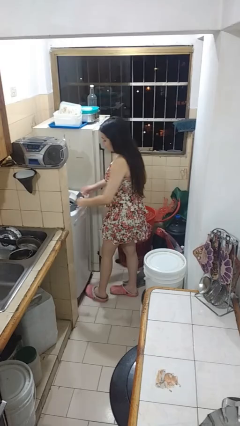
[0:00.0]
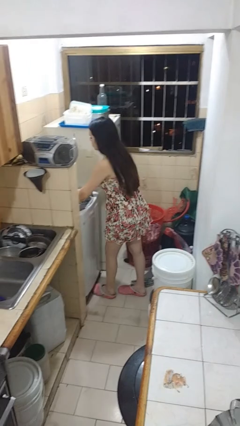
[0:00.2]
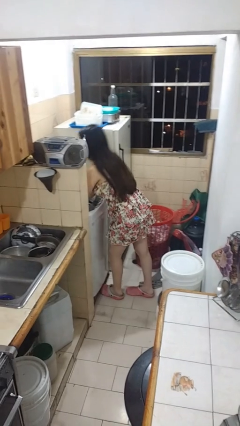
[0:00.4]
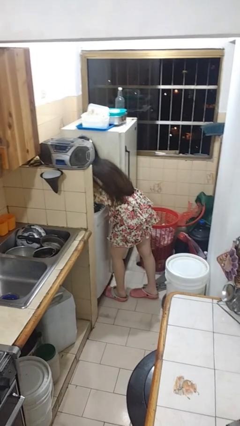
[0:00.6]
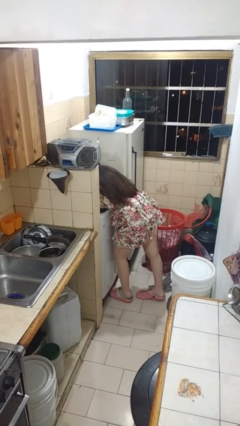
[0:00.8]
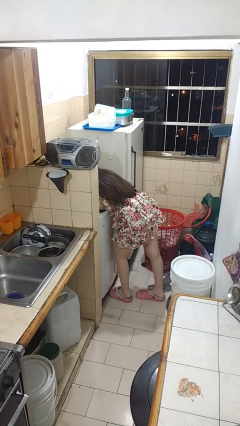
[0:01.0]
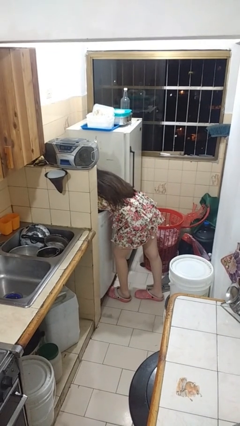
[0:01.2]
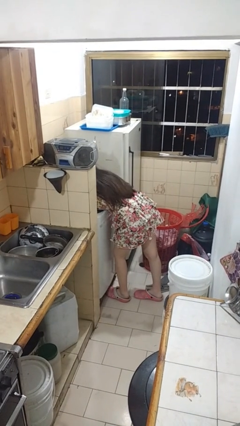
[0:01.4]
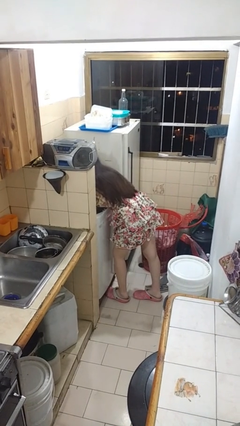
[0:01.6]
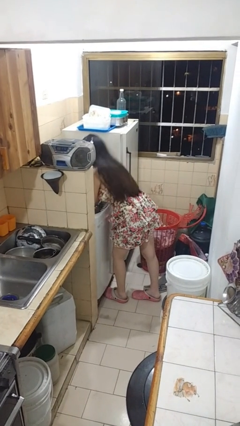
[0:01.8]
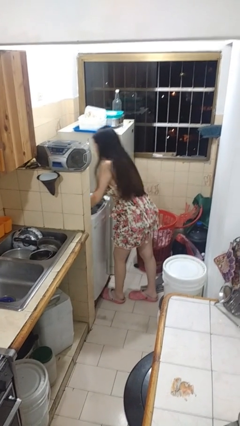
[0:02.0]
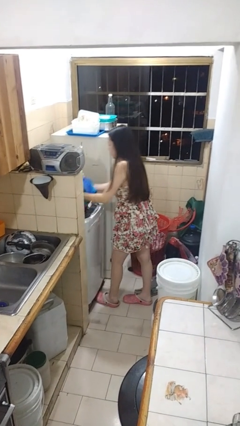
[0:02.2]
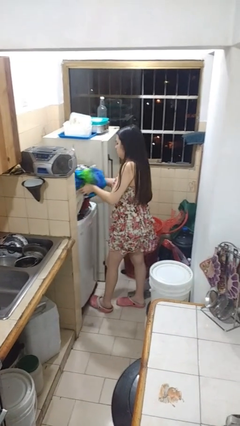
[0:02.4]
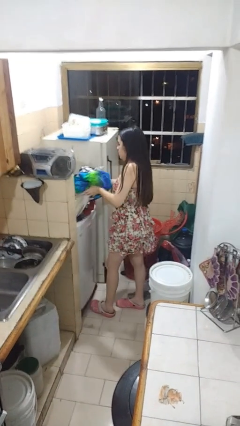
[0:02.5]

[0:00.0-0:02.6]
person unloads clotheswasher

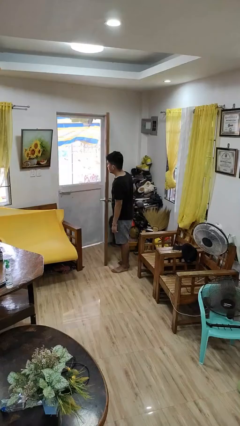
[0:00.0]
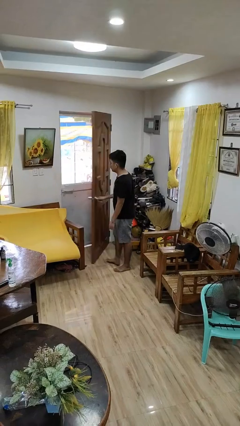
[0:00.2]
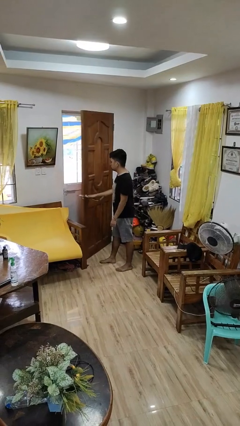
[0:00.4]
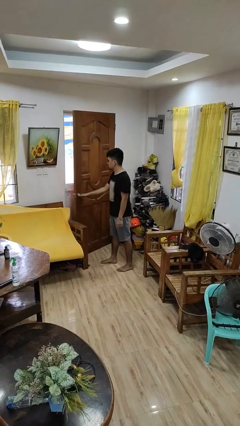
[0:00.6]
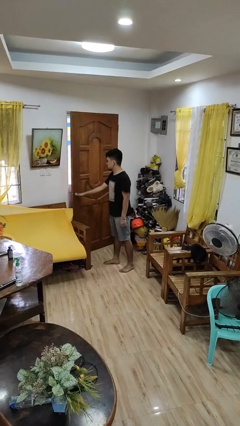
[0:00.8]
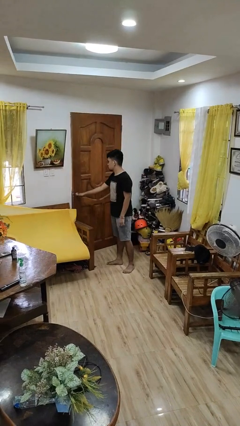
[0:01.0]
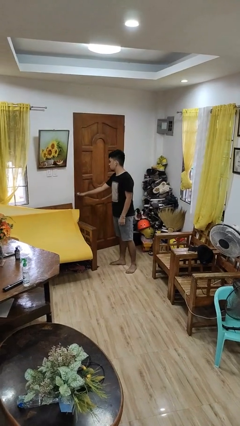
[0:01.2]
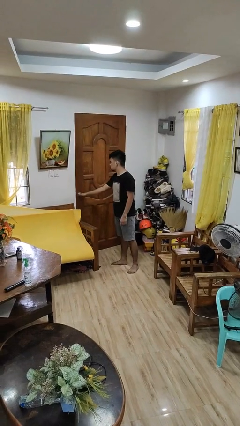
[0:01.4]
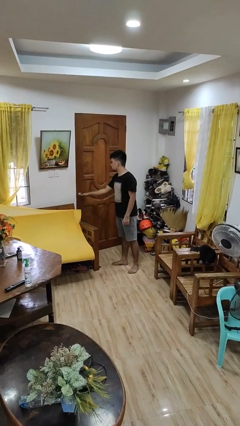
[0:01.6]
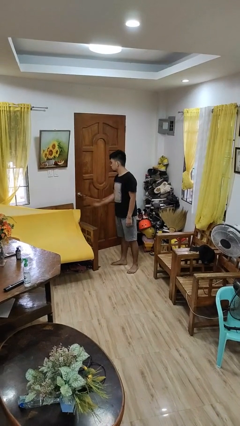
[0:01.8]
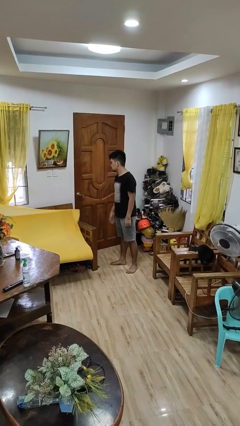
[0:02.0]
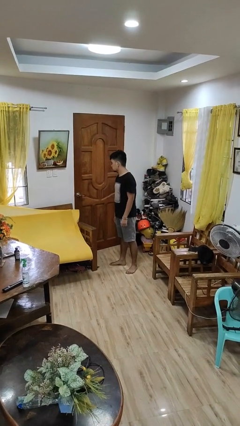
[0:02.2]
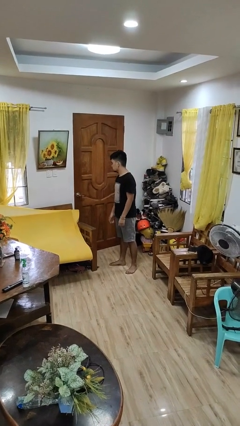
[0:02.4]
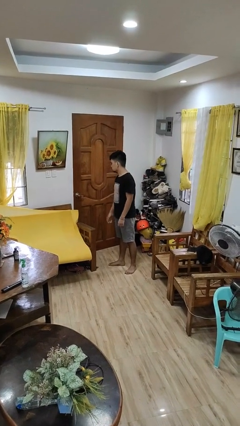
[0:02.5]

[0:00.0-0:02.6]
person closes facility door

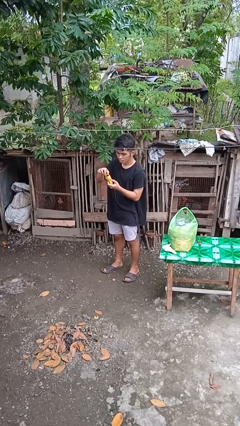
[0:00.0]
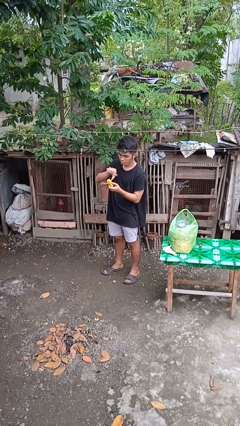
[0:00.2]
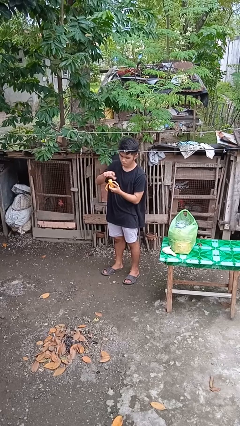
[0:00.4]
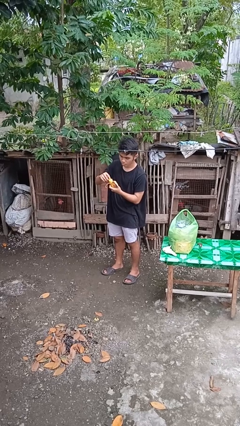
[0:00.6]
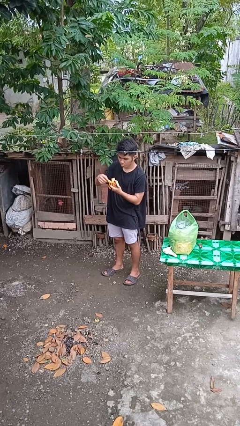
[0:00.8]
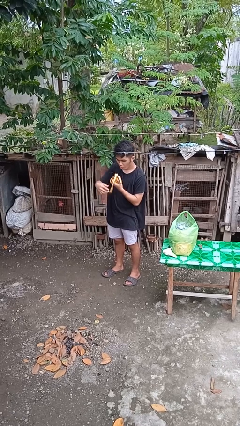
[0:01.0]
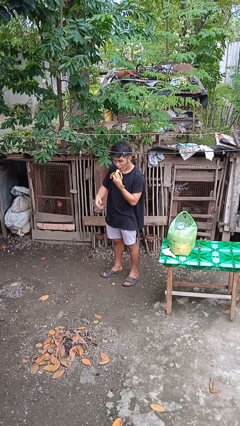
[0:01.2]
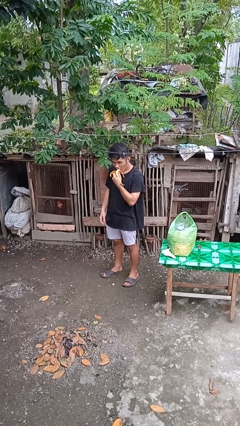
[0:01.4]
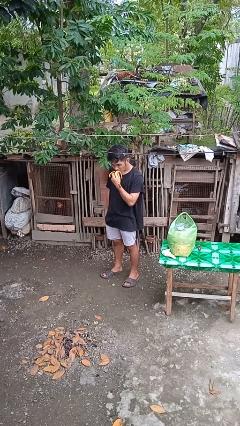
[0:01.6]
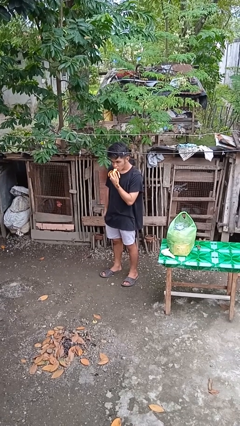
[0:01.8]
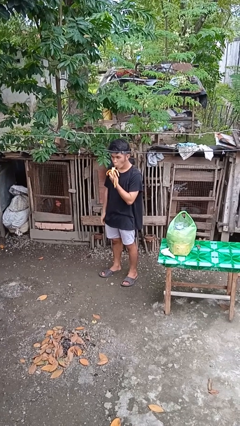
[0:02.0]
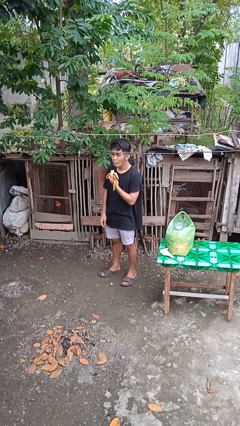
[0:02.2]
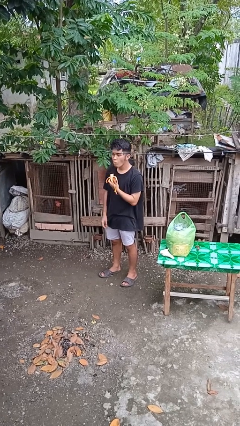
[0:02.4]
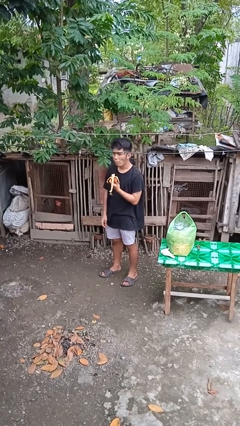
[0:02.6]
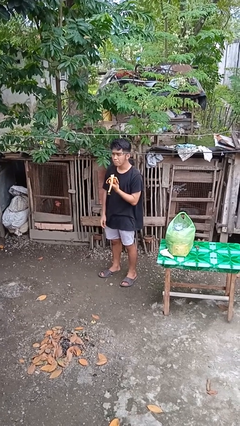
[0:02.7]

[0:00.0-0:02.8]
person eats banana

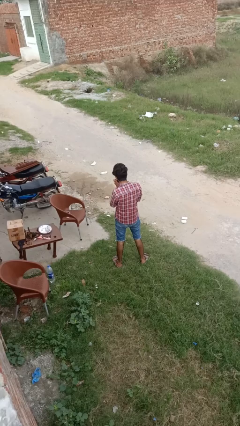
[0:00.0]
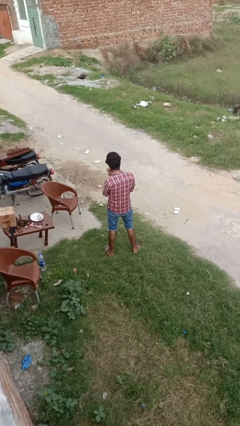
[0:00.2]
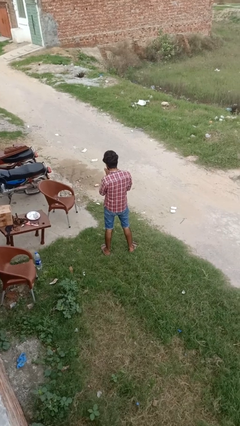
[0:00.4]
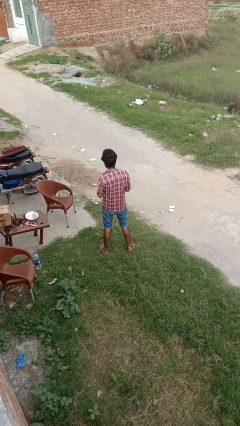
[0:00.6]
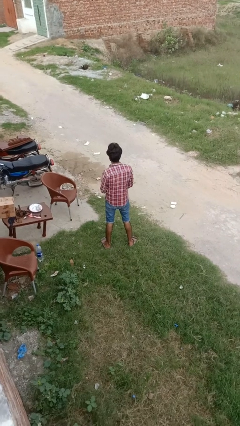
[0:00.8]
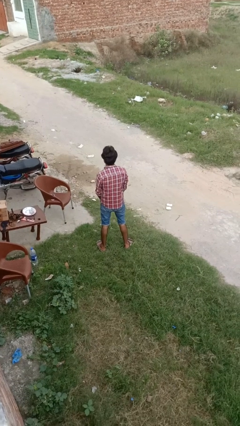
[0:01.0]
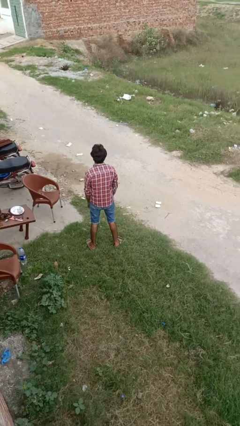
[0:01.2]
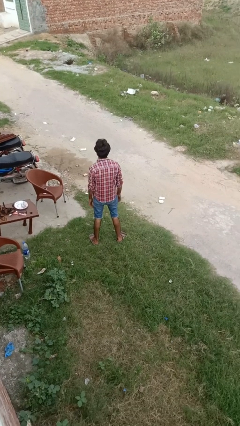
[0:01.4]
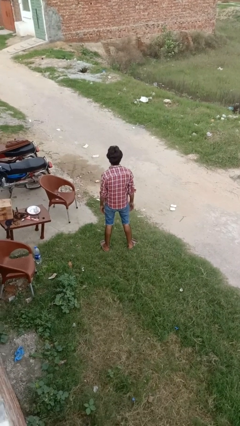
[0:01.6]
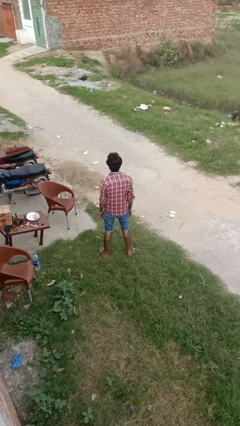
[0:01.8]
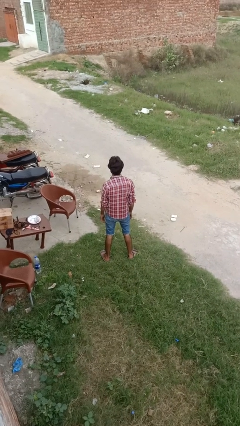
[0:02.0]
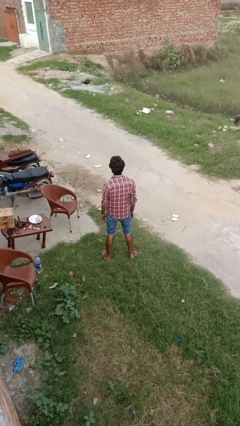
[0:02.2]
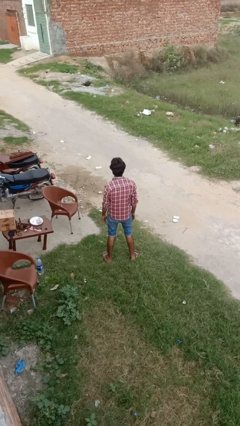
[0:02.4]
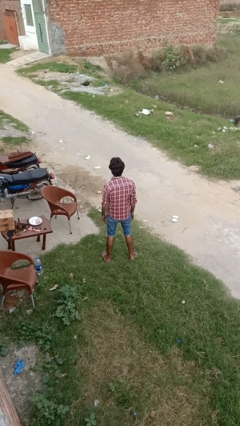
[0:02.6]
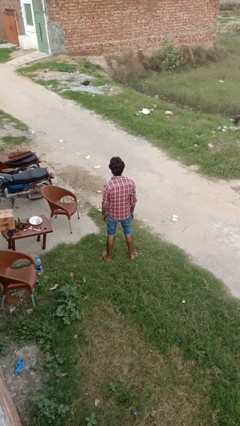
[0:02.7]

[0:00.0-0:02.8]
person takes off ring

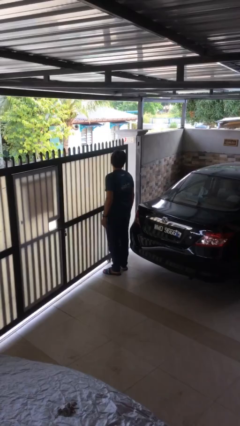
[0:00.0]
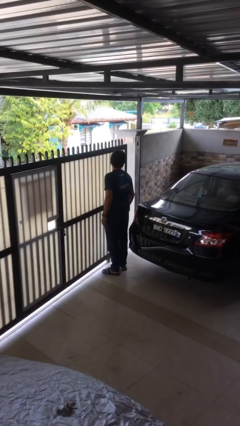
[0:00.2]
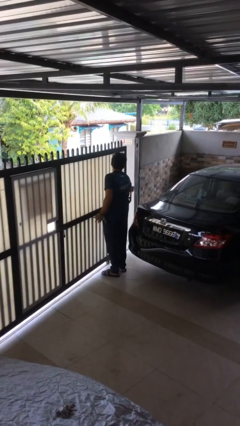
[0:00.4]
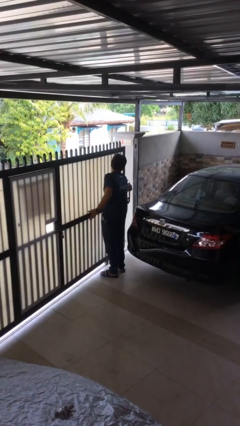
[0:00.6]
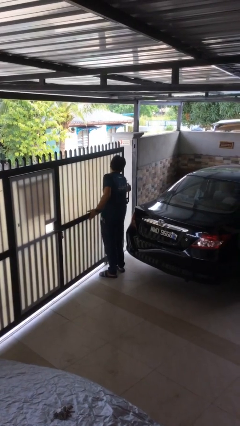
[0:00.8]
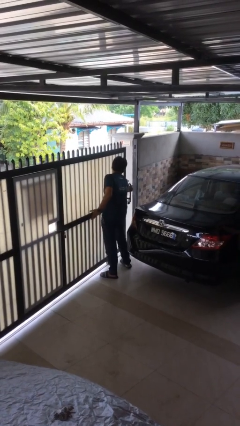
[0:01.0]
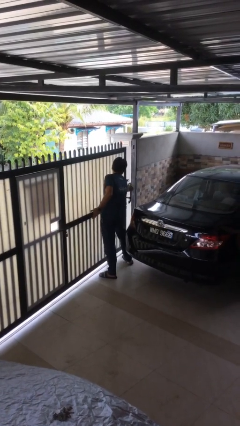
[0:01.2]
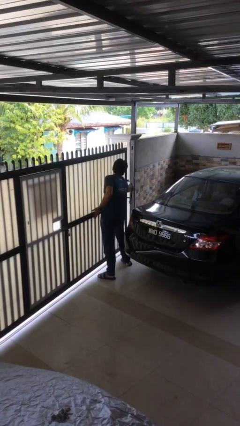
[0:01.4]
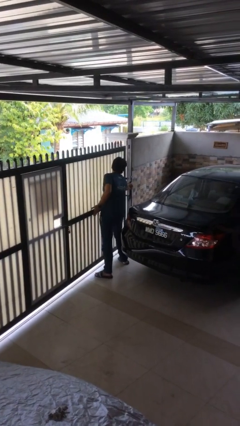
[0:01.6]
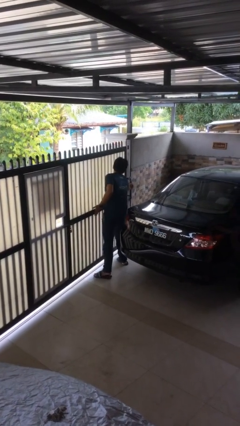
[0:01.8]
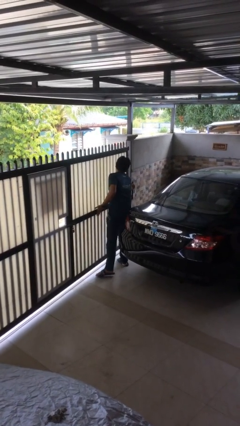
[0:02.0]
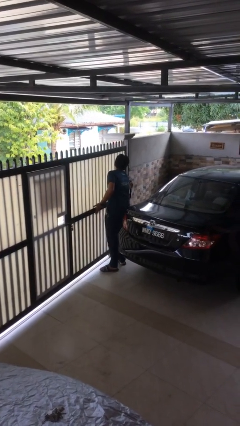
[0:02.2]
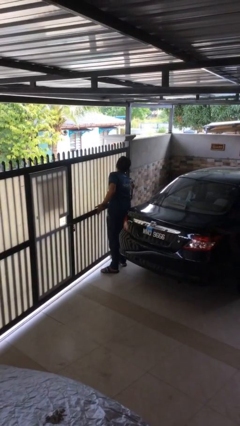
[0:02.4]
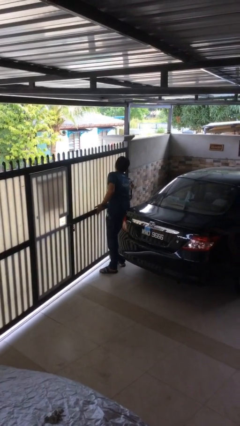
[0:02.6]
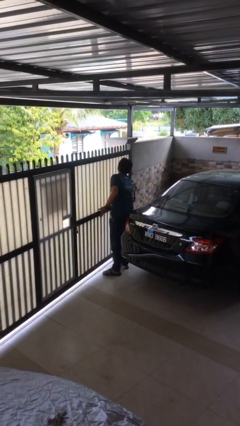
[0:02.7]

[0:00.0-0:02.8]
person closes sliding door

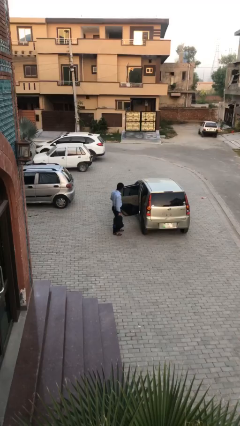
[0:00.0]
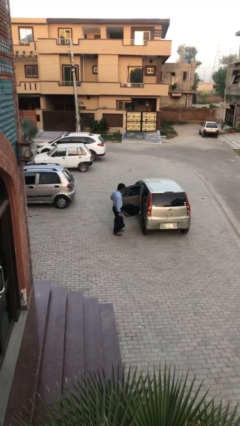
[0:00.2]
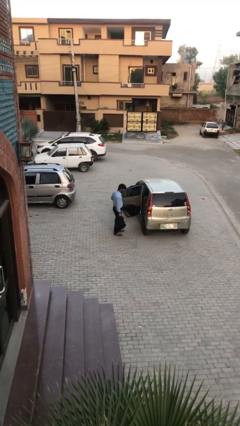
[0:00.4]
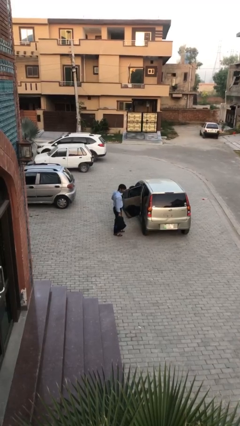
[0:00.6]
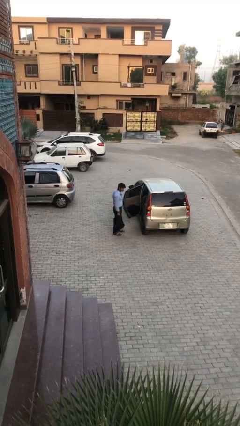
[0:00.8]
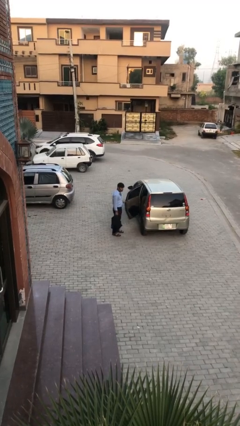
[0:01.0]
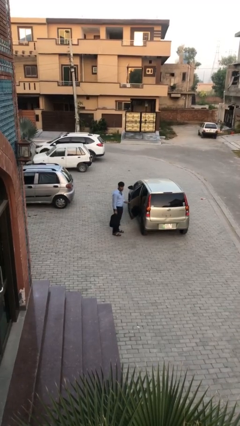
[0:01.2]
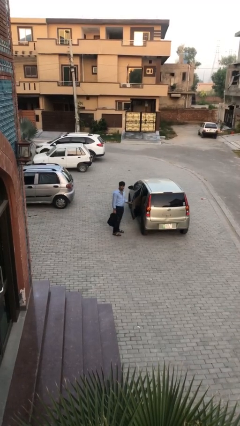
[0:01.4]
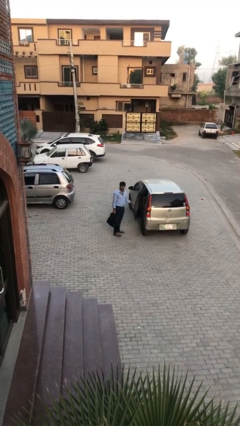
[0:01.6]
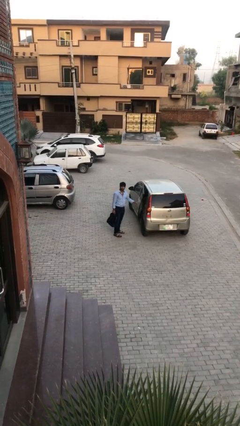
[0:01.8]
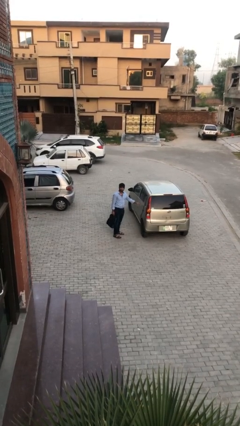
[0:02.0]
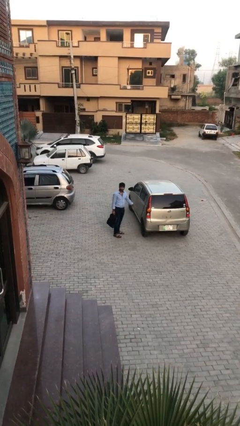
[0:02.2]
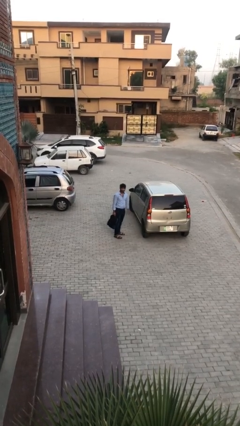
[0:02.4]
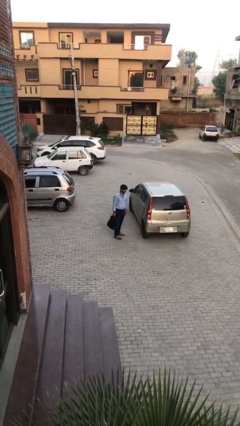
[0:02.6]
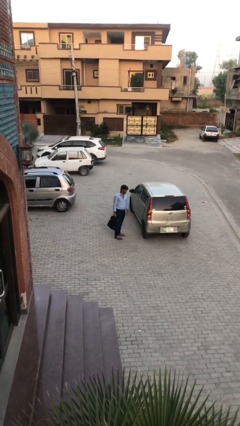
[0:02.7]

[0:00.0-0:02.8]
person closes car door

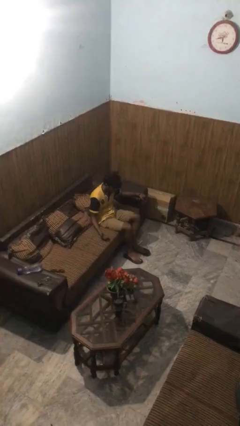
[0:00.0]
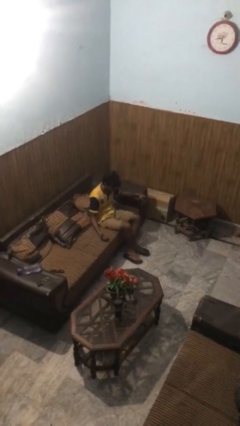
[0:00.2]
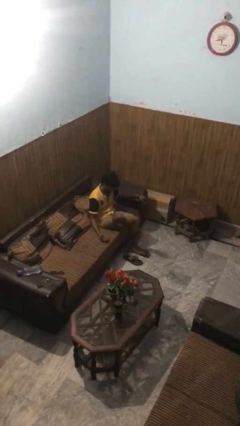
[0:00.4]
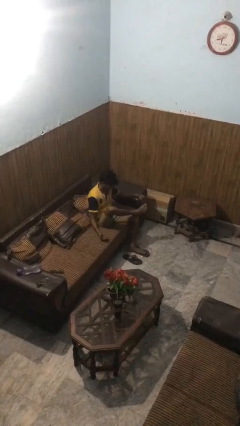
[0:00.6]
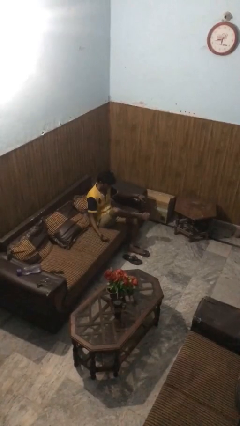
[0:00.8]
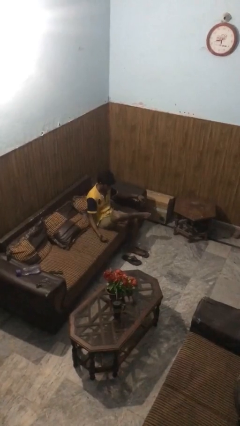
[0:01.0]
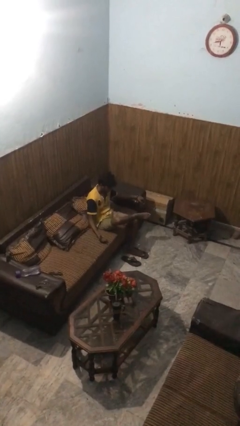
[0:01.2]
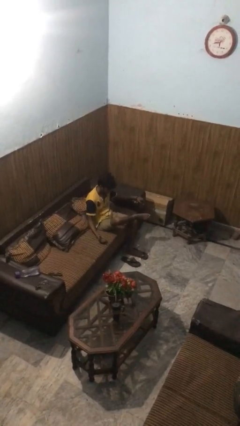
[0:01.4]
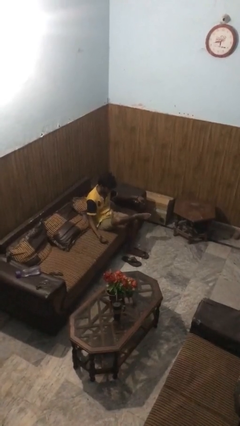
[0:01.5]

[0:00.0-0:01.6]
person crosses legs
